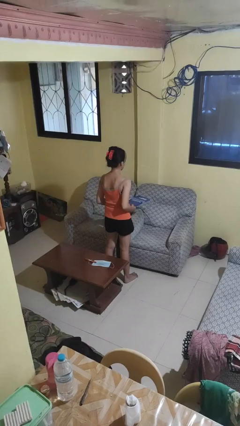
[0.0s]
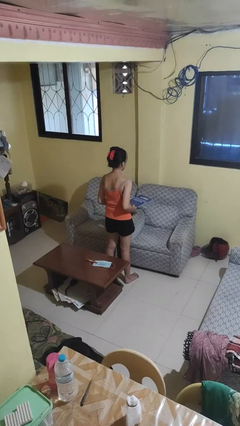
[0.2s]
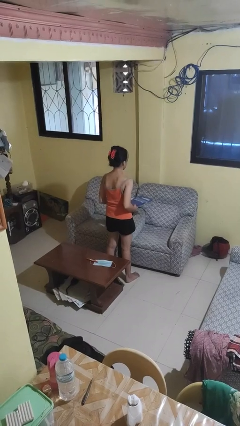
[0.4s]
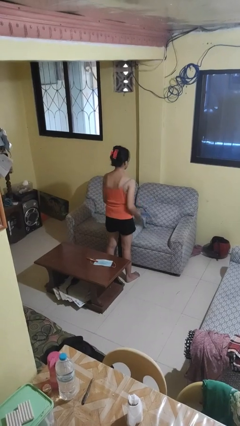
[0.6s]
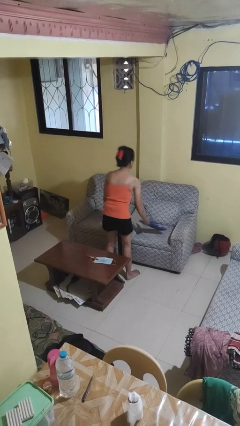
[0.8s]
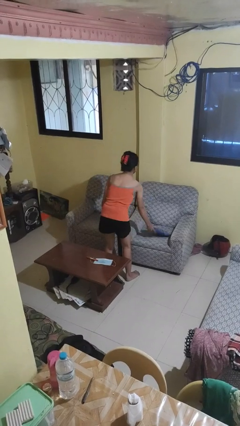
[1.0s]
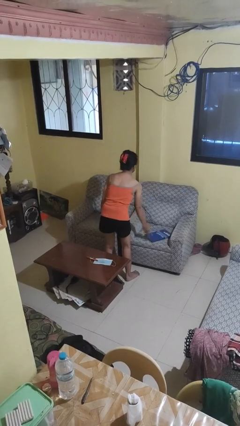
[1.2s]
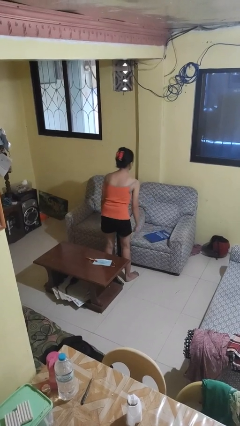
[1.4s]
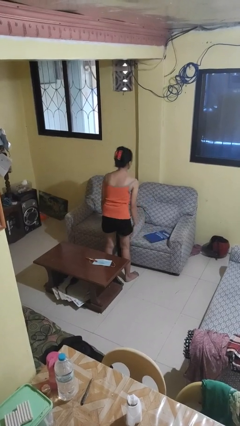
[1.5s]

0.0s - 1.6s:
person puts down object on couch

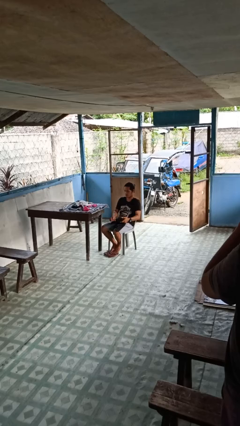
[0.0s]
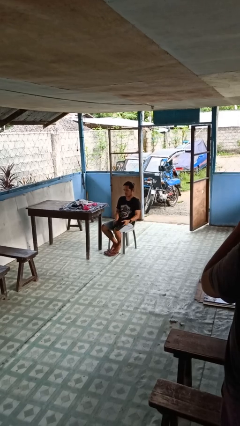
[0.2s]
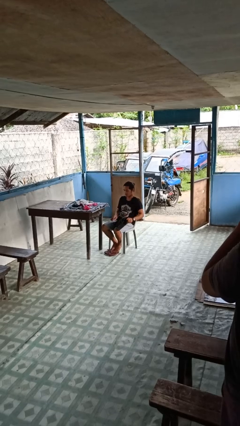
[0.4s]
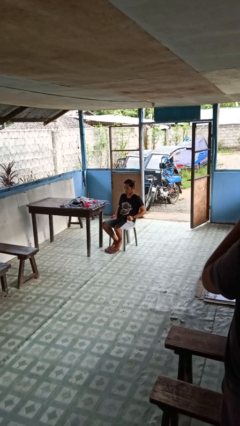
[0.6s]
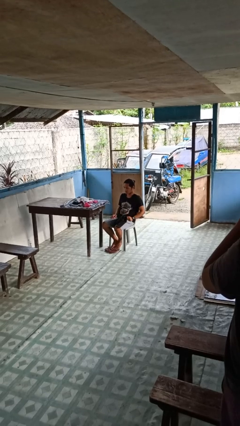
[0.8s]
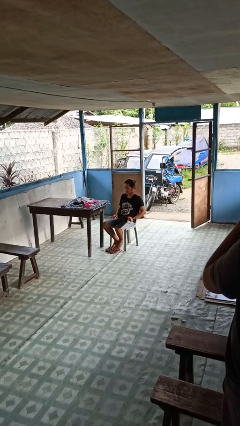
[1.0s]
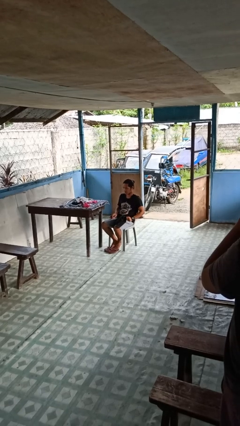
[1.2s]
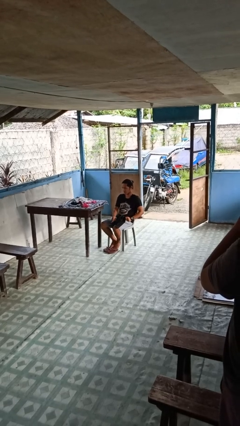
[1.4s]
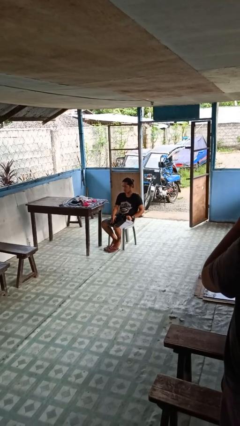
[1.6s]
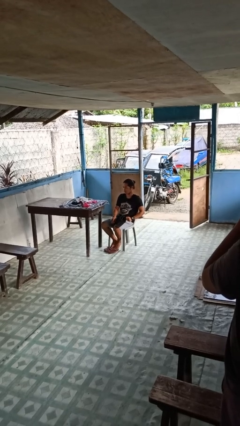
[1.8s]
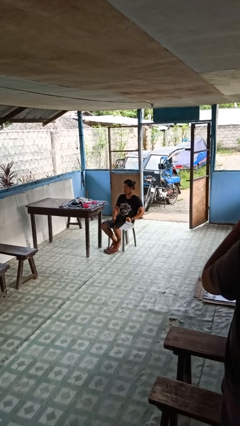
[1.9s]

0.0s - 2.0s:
person folds pants

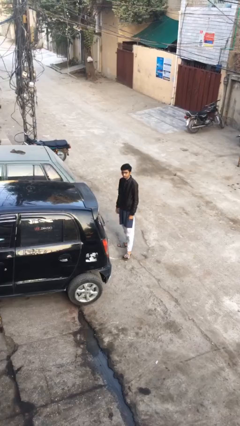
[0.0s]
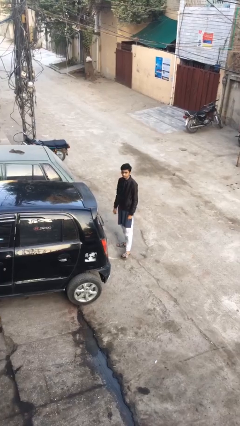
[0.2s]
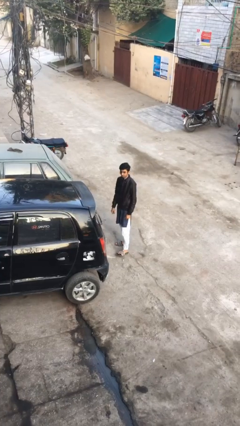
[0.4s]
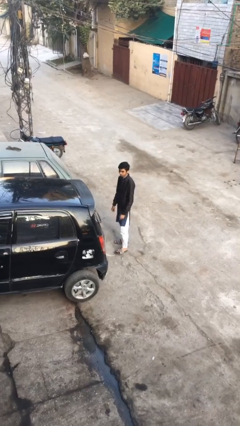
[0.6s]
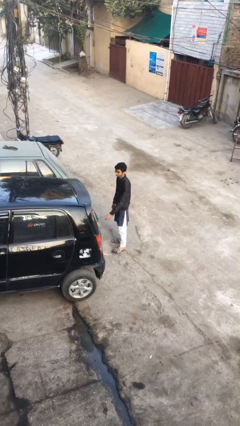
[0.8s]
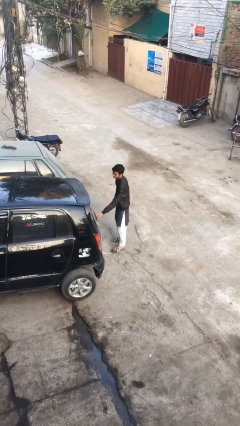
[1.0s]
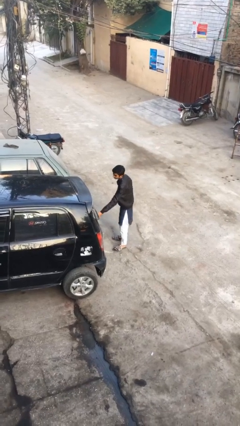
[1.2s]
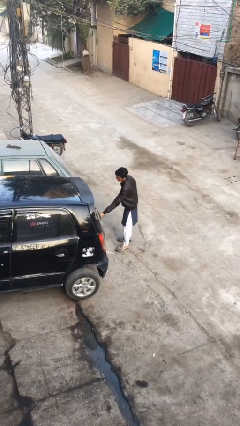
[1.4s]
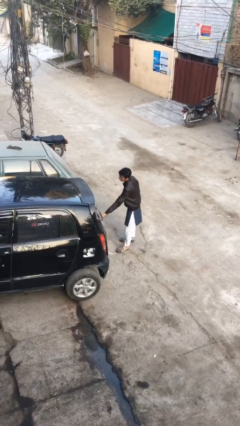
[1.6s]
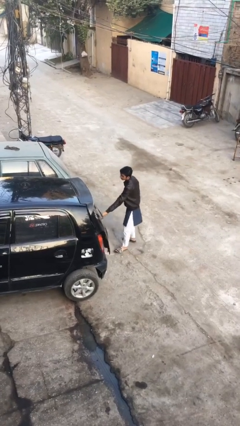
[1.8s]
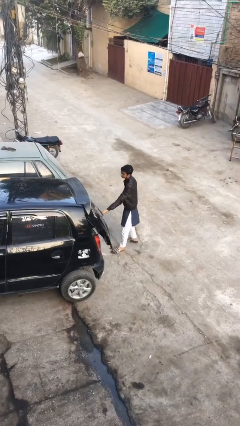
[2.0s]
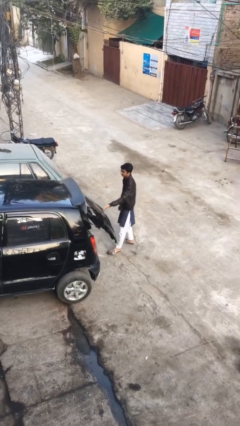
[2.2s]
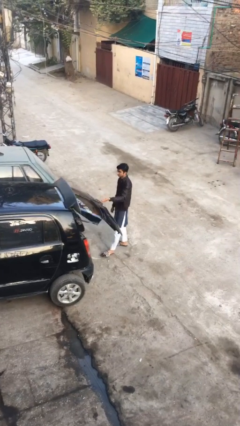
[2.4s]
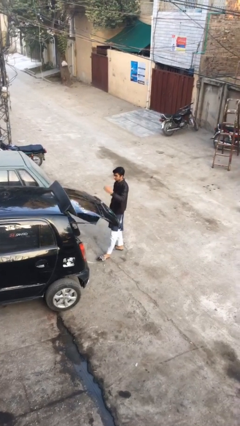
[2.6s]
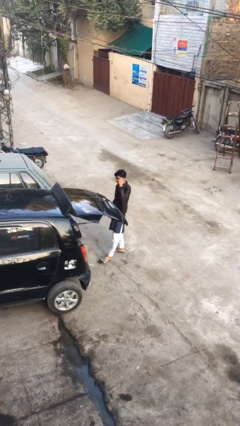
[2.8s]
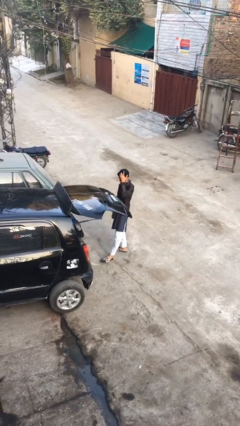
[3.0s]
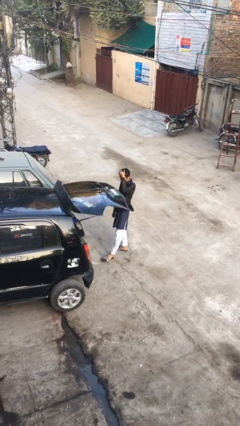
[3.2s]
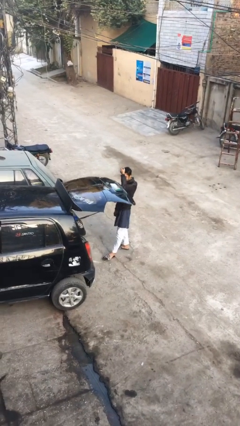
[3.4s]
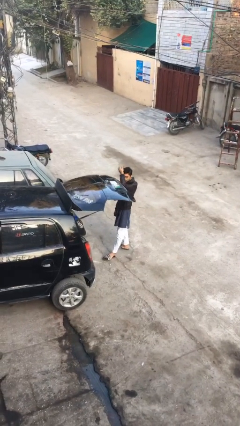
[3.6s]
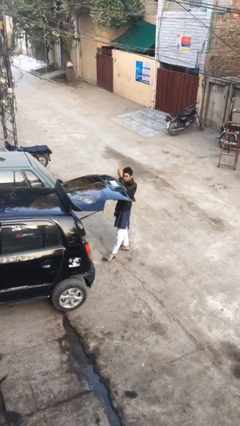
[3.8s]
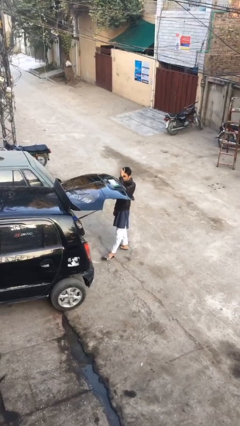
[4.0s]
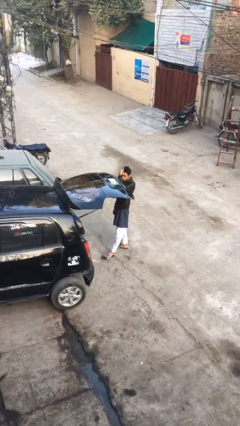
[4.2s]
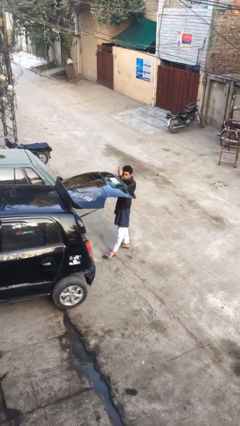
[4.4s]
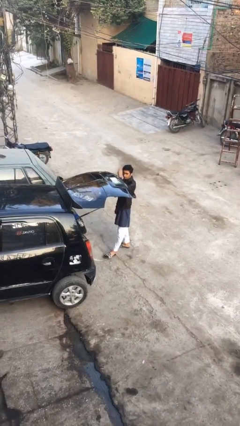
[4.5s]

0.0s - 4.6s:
person opens car trunk

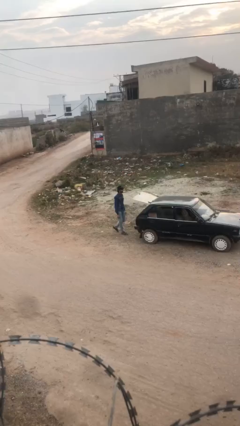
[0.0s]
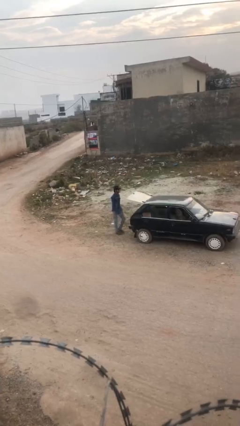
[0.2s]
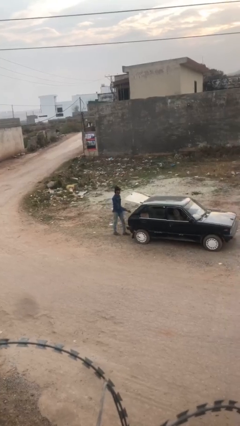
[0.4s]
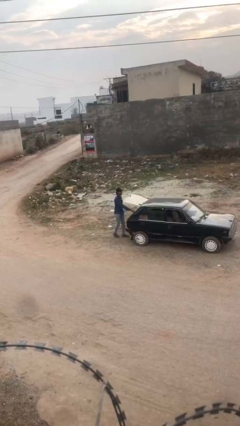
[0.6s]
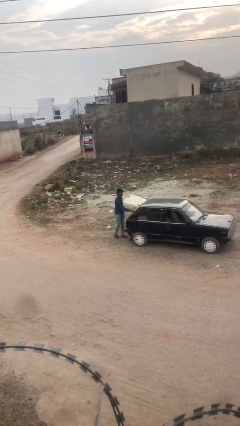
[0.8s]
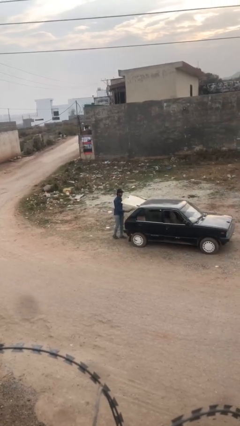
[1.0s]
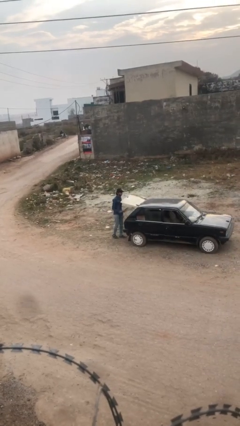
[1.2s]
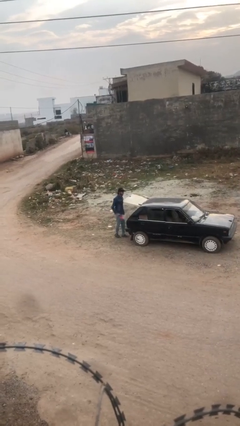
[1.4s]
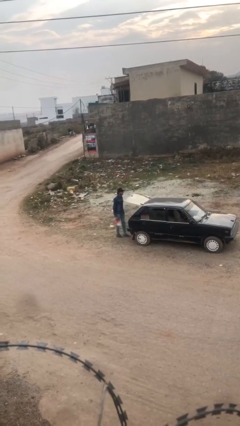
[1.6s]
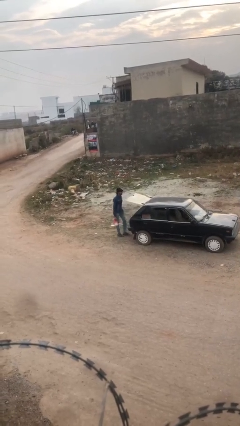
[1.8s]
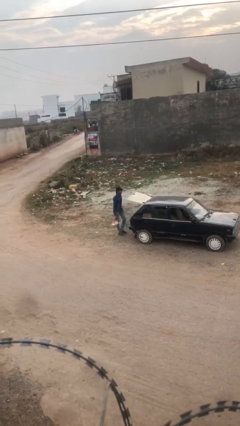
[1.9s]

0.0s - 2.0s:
person unloads car

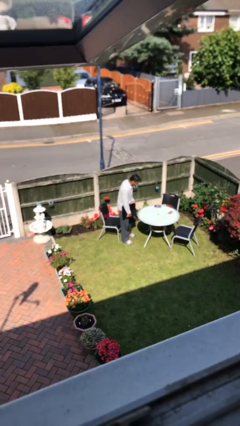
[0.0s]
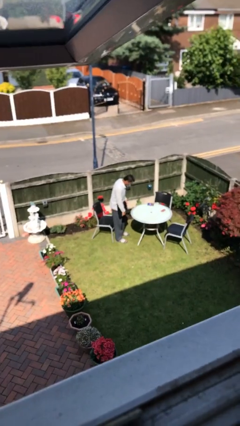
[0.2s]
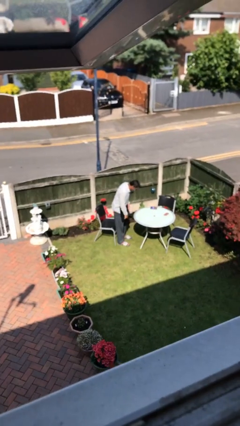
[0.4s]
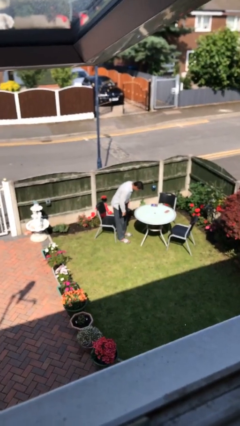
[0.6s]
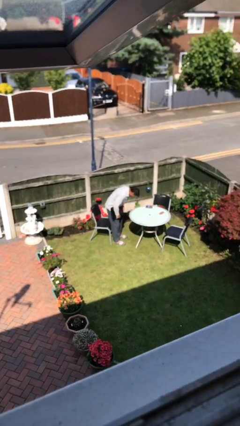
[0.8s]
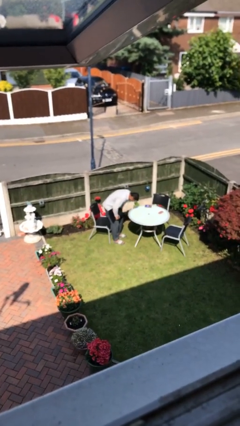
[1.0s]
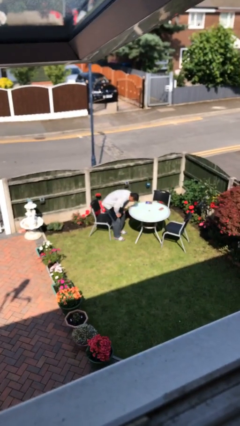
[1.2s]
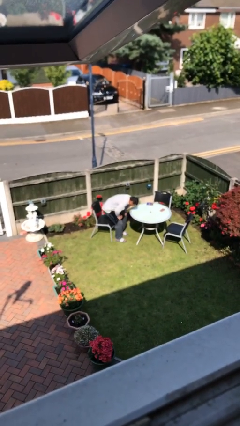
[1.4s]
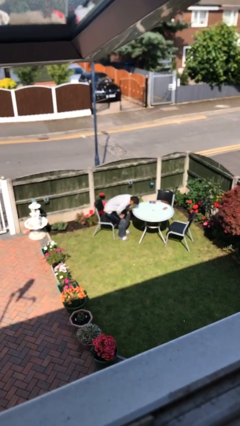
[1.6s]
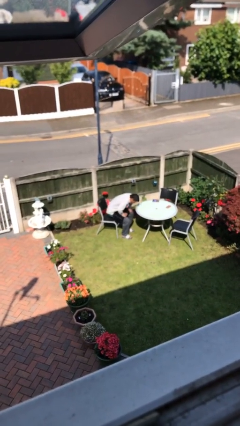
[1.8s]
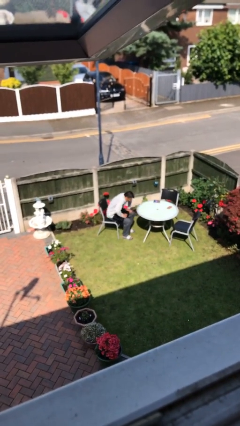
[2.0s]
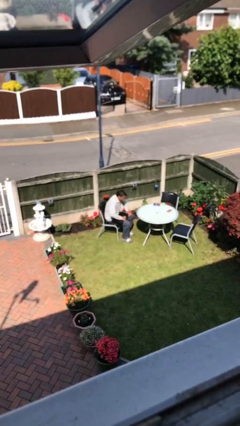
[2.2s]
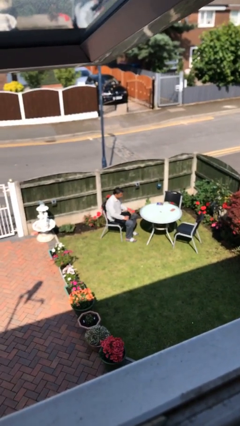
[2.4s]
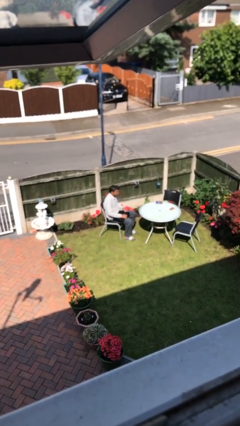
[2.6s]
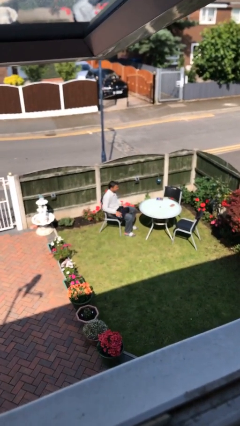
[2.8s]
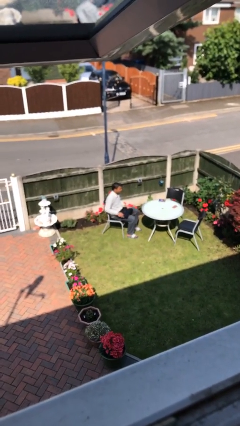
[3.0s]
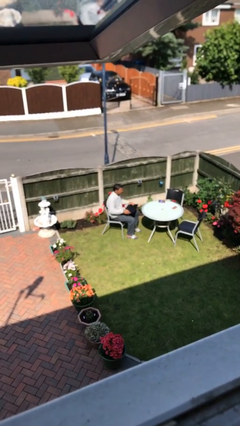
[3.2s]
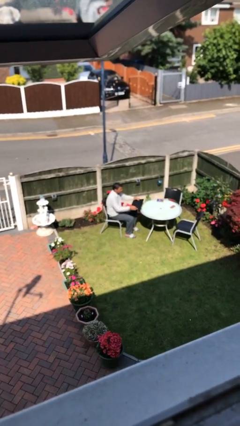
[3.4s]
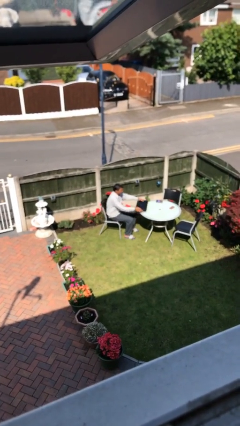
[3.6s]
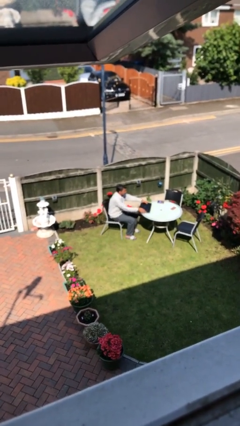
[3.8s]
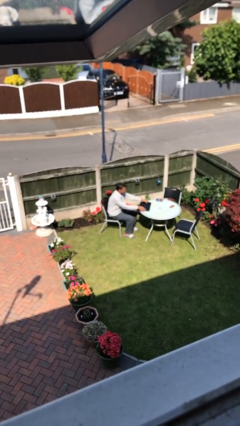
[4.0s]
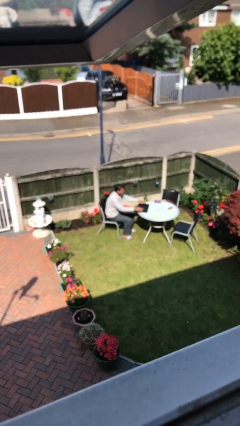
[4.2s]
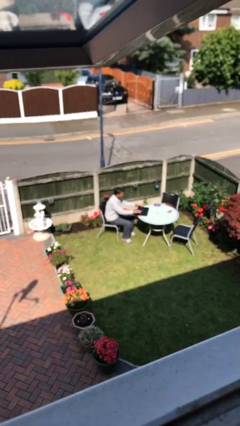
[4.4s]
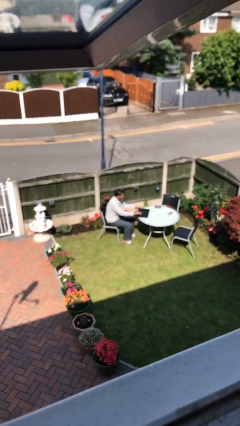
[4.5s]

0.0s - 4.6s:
person sits down

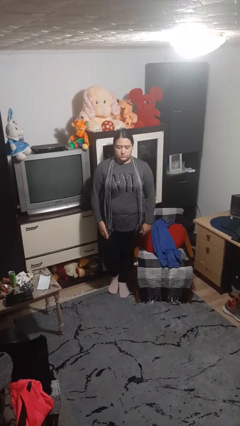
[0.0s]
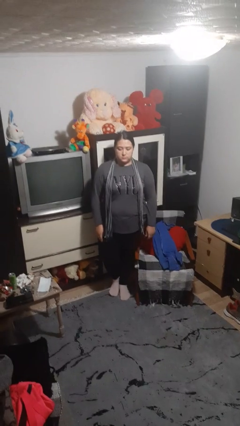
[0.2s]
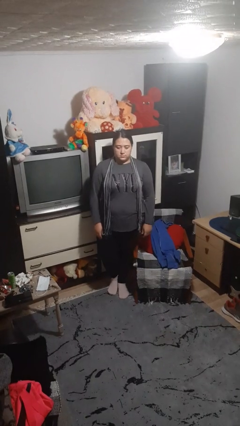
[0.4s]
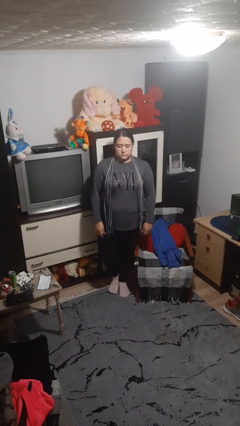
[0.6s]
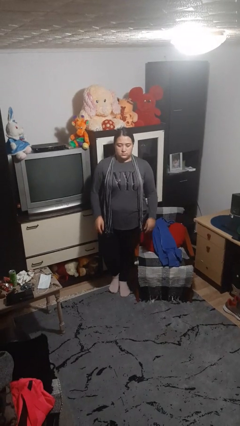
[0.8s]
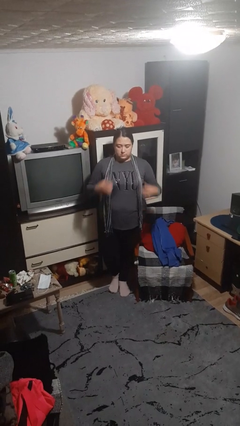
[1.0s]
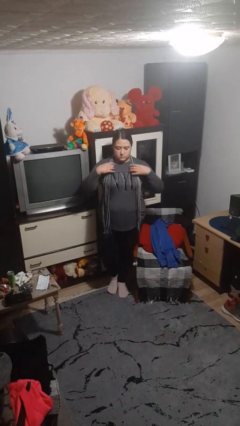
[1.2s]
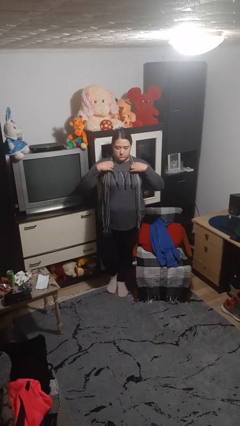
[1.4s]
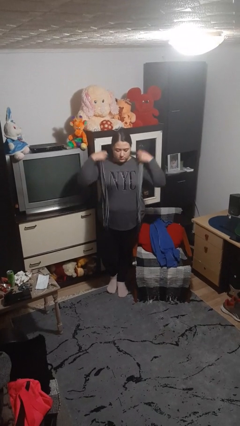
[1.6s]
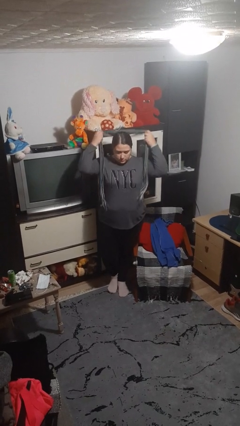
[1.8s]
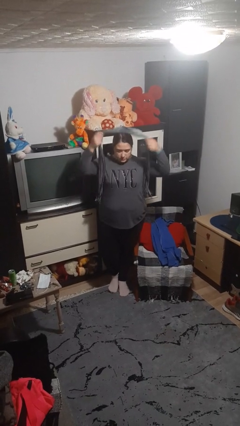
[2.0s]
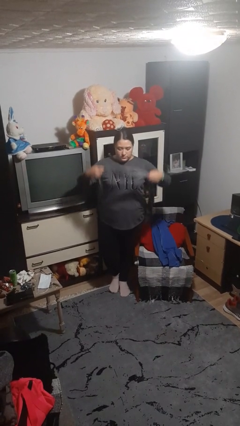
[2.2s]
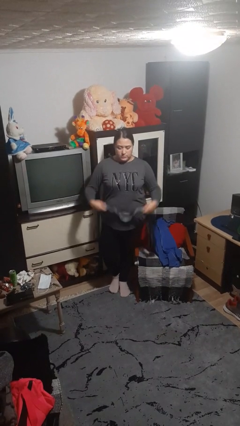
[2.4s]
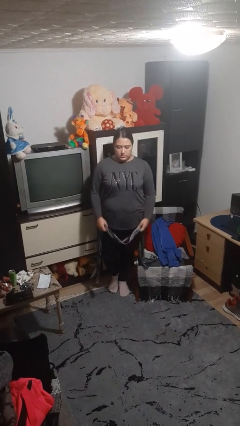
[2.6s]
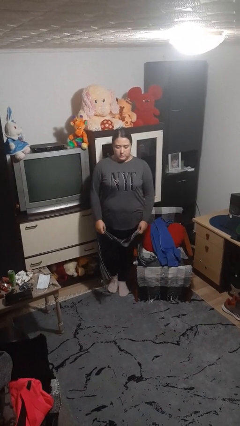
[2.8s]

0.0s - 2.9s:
person takes off scarf
